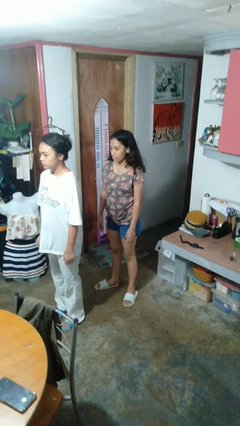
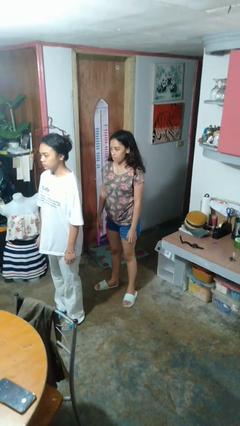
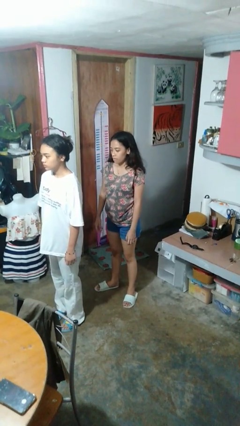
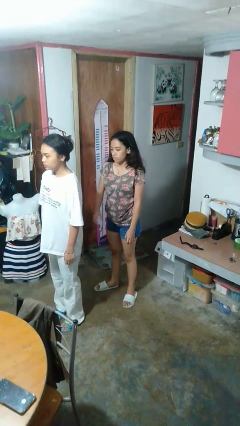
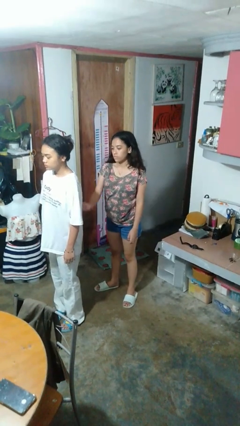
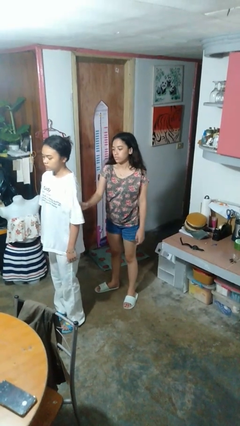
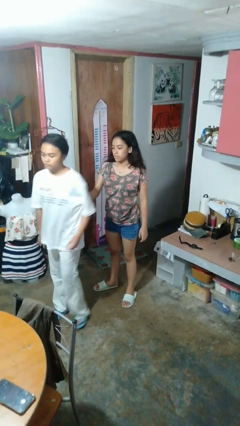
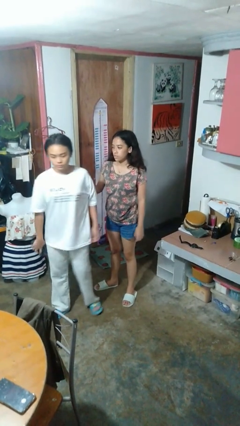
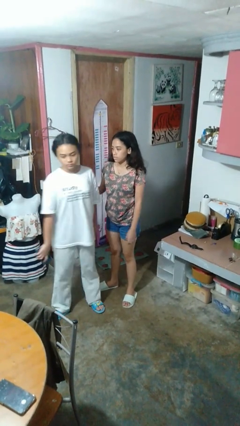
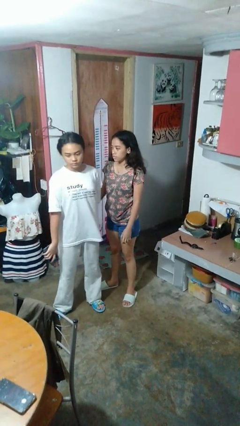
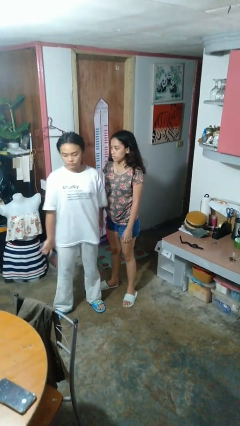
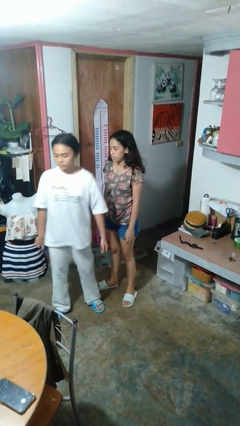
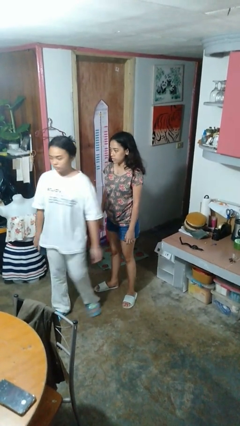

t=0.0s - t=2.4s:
person grabs person by bicep

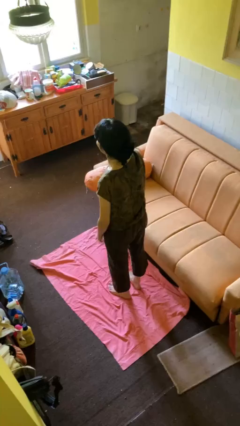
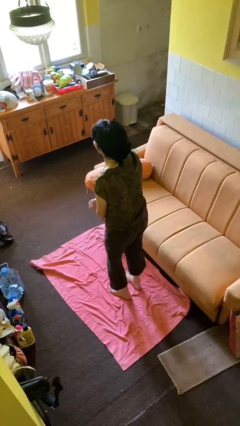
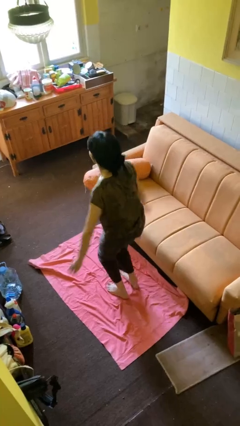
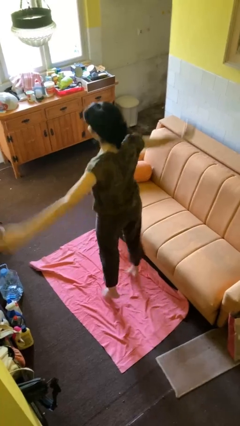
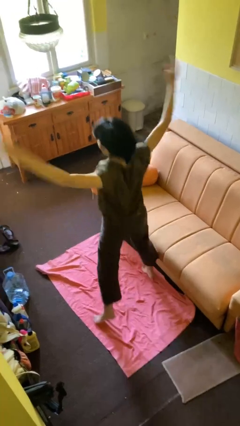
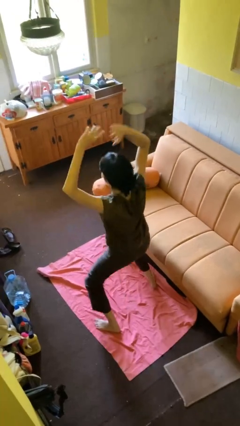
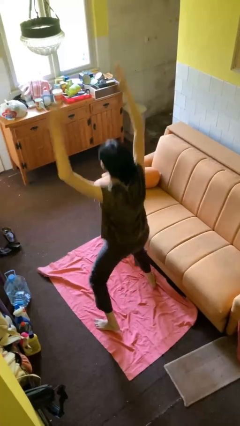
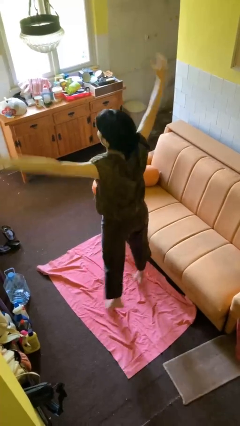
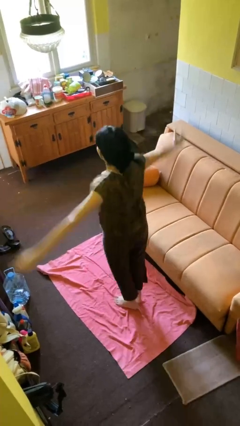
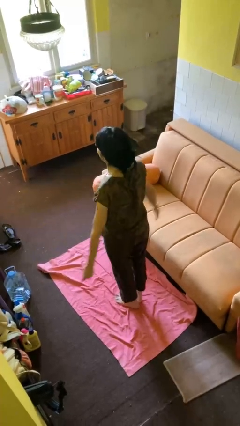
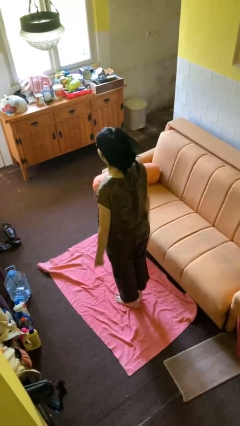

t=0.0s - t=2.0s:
person exercises with jumping jacks

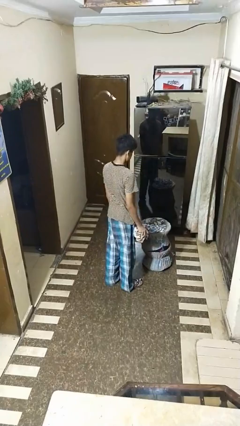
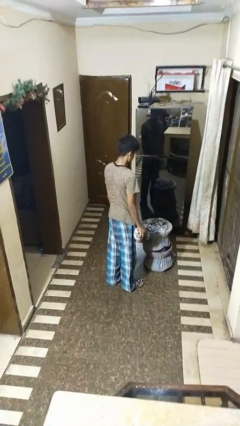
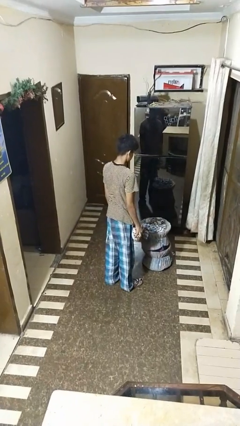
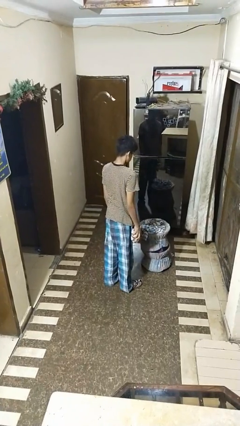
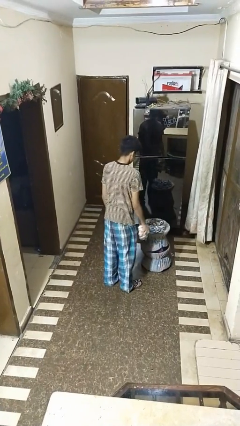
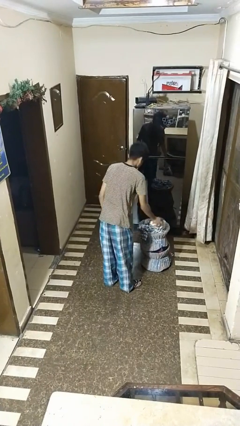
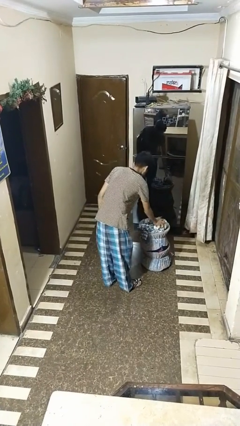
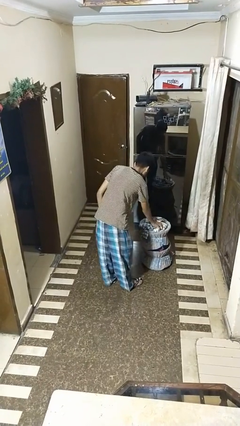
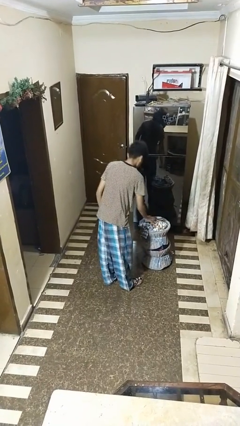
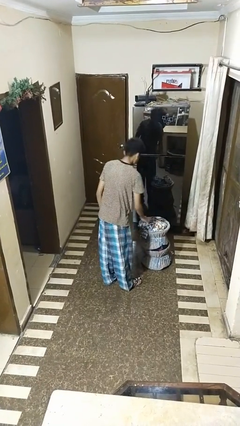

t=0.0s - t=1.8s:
person puts object into basket

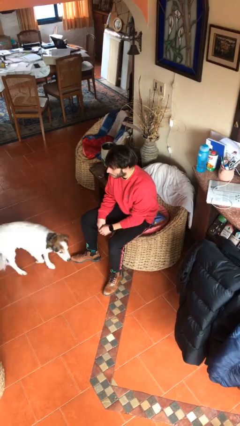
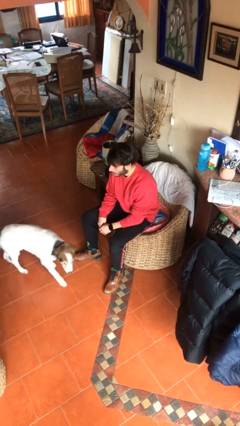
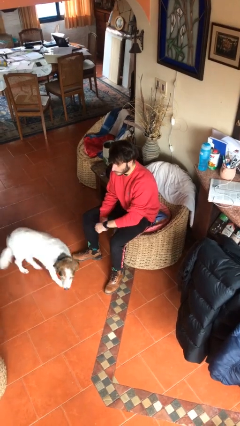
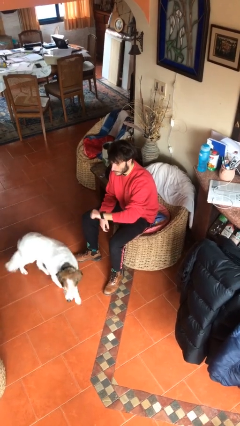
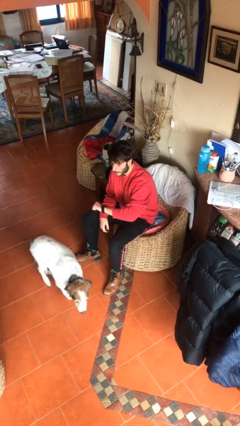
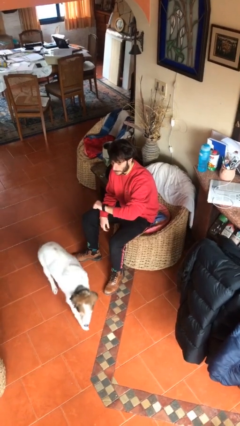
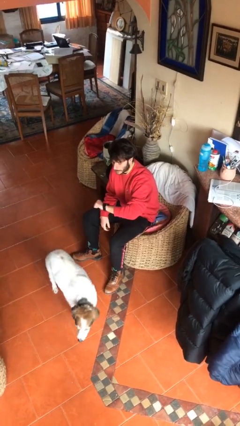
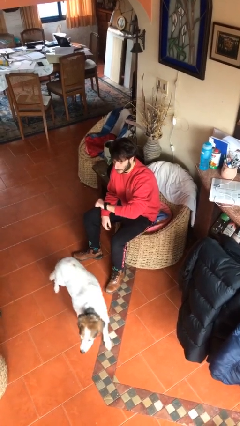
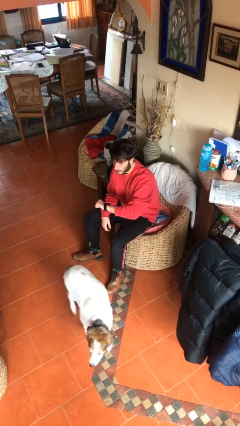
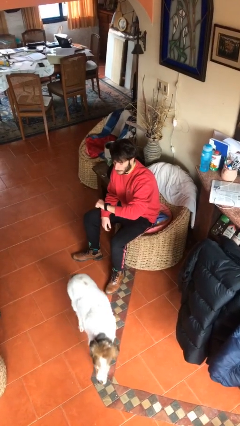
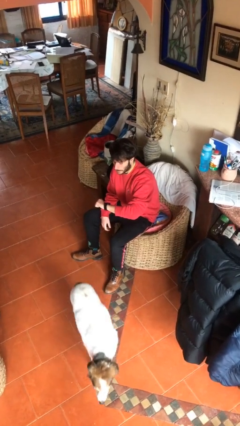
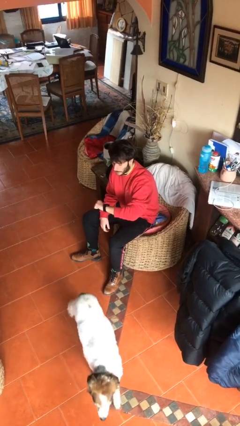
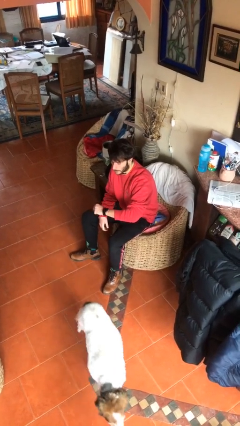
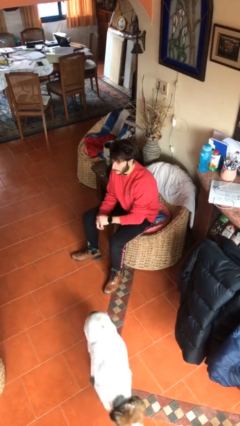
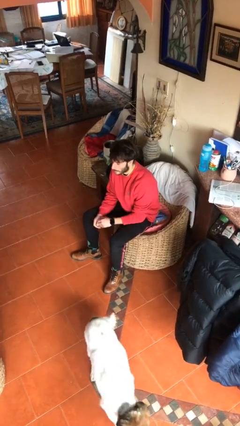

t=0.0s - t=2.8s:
person looks at wristwatch

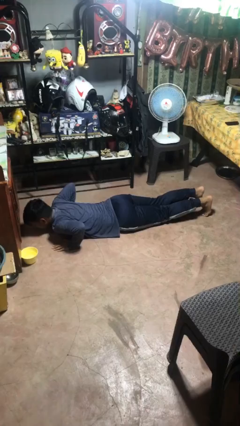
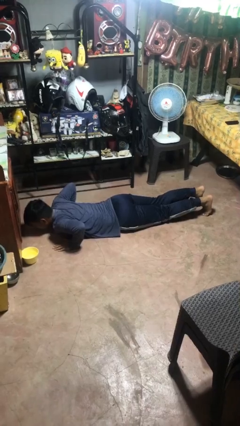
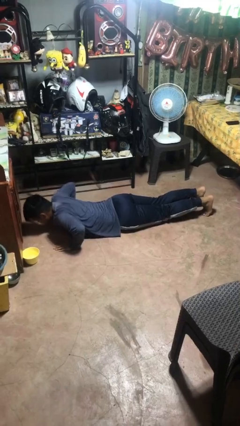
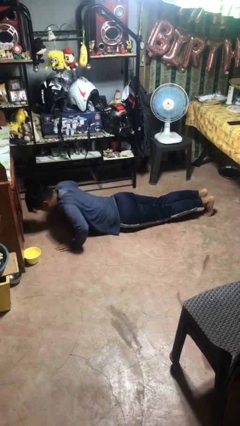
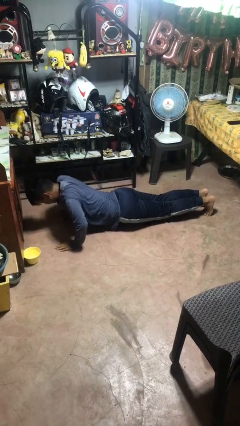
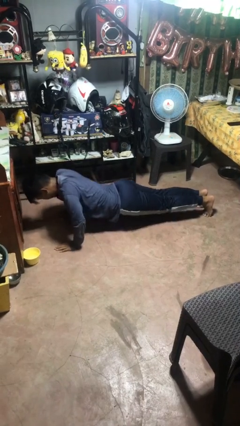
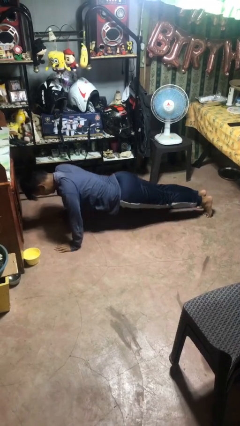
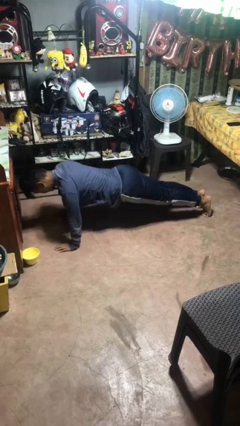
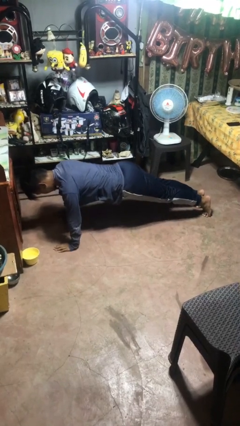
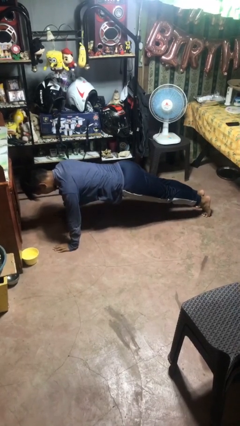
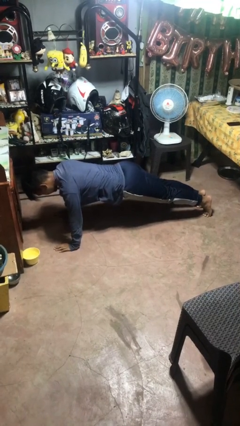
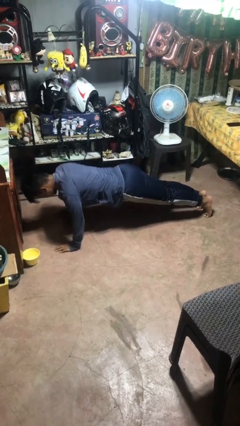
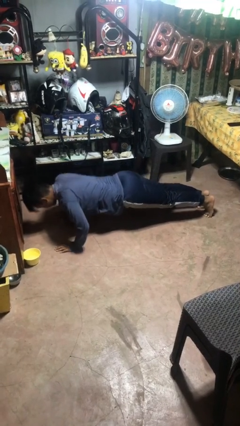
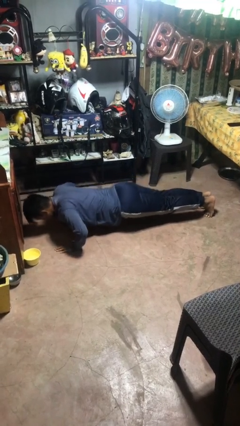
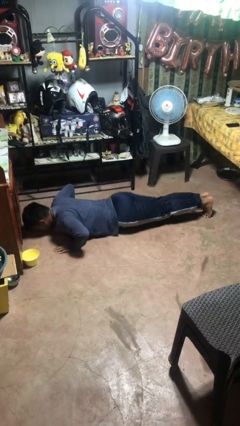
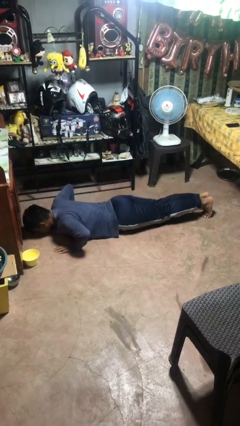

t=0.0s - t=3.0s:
person exercises with pushup

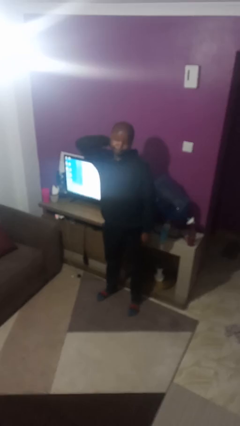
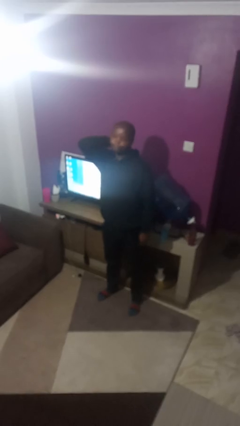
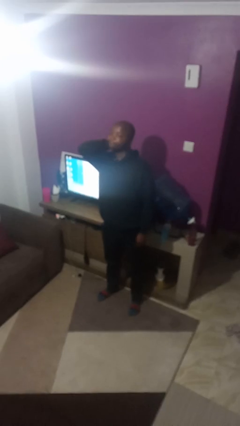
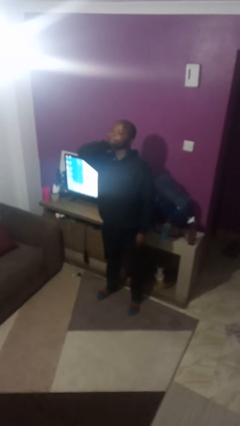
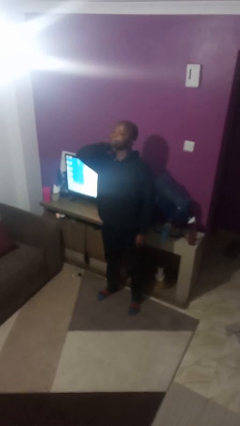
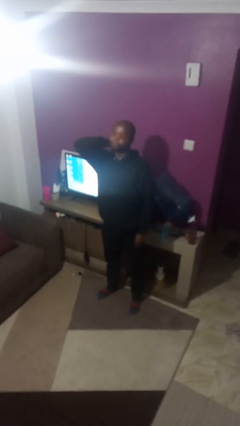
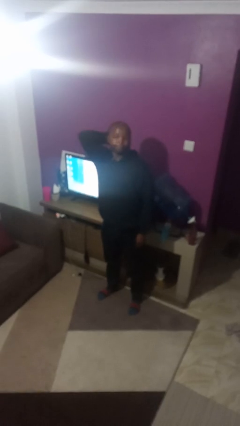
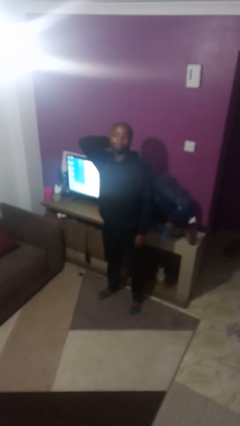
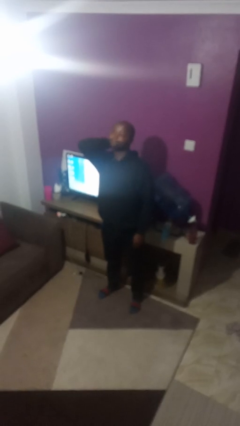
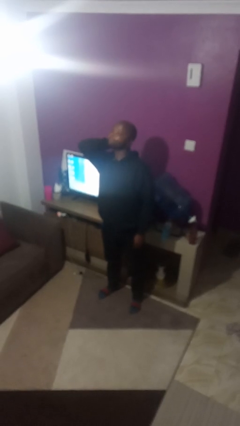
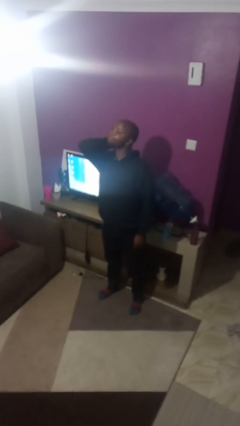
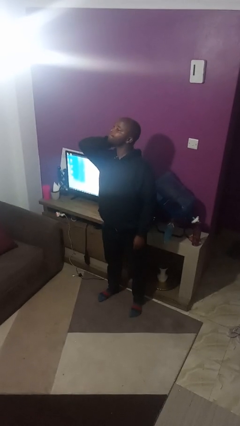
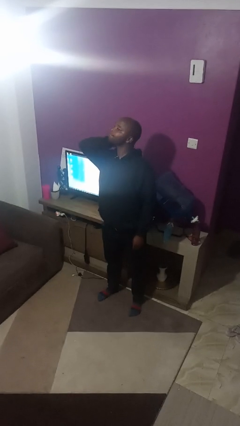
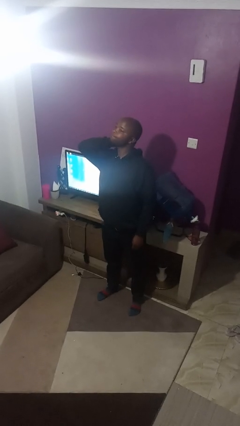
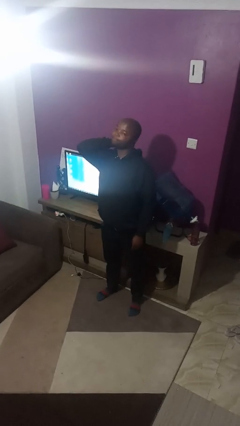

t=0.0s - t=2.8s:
person rubs neck

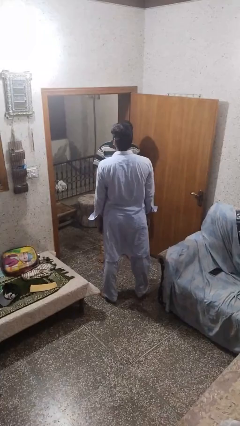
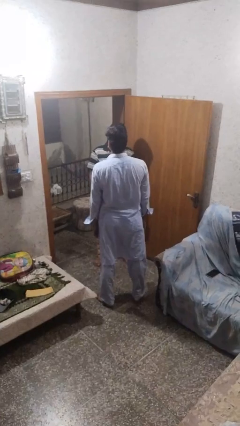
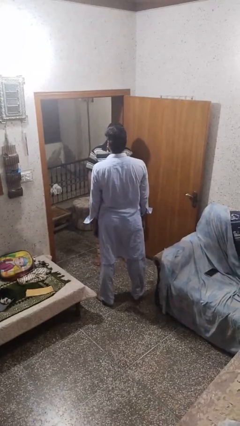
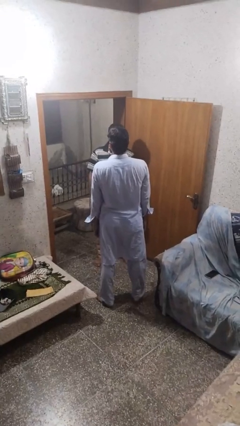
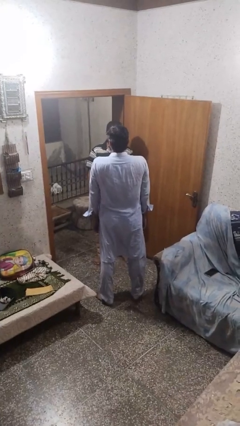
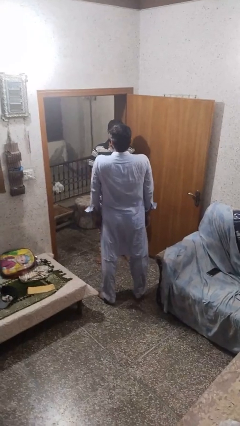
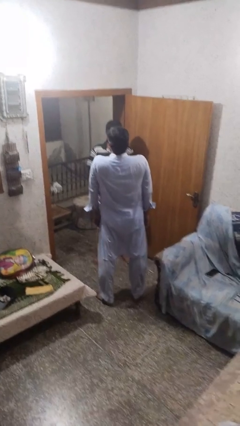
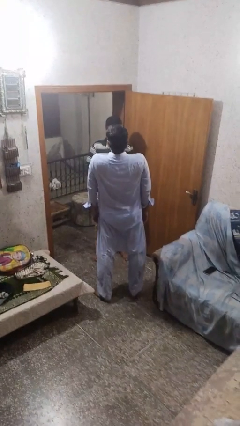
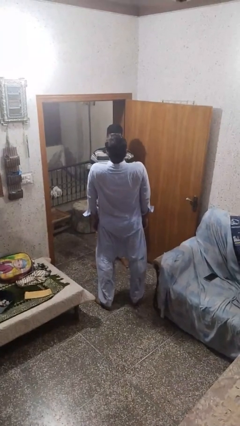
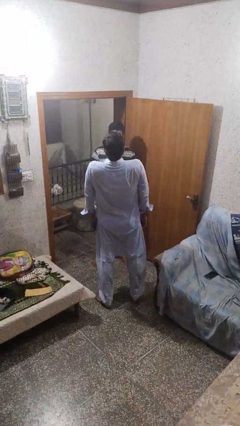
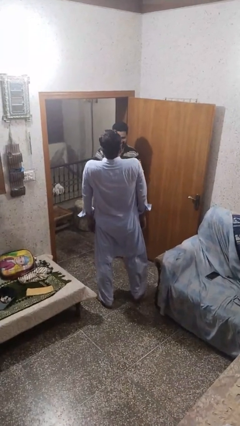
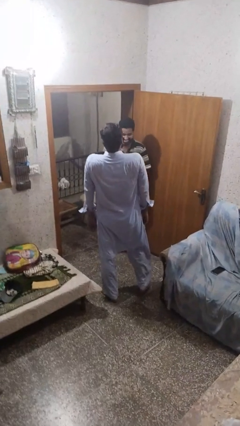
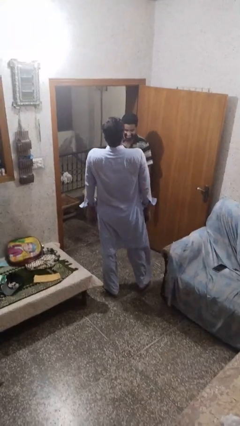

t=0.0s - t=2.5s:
person laughs with person
